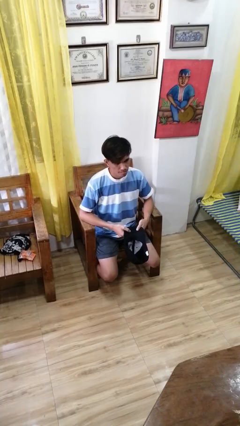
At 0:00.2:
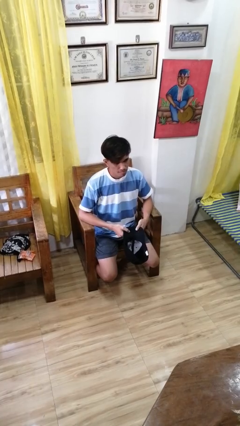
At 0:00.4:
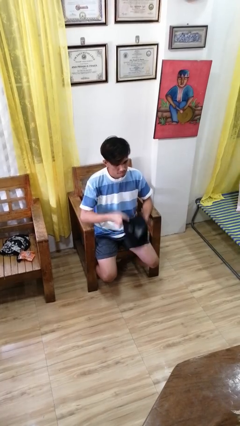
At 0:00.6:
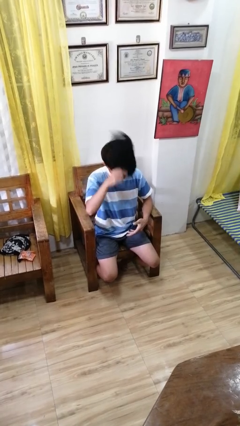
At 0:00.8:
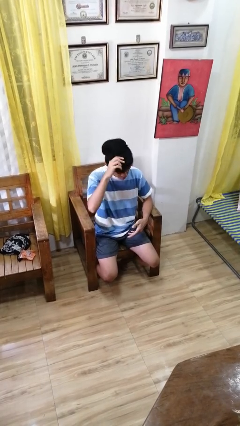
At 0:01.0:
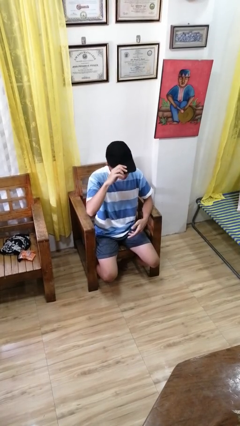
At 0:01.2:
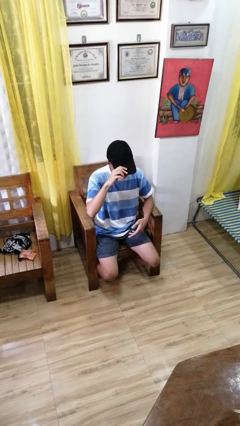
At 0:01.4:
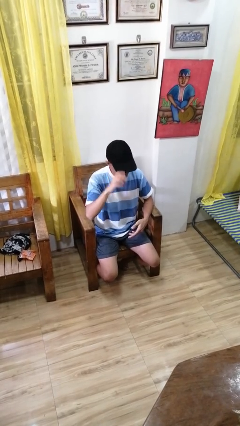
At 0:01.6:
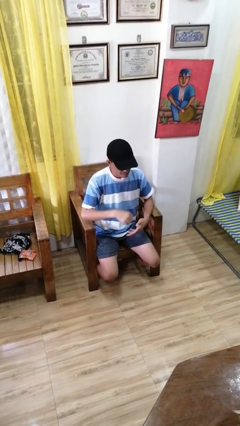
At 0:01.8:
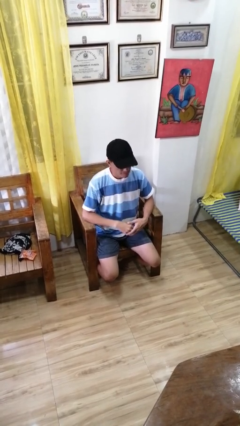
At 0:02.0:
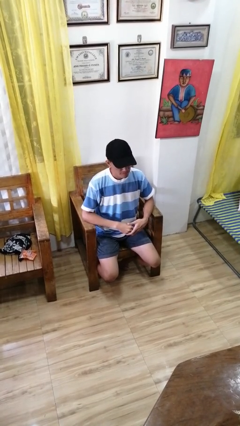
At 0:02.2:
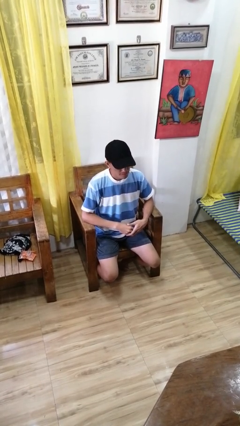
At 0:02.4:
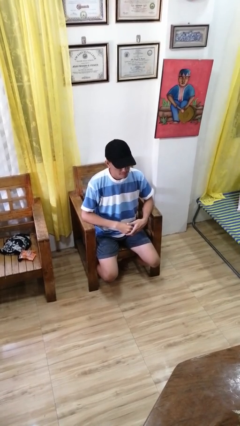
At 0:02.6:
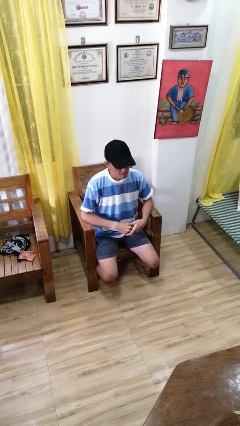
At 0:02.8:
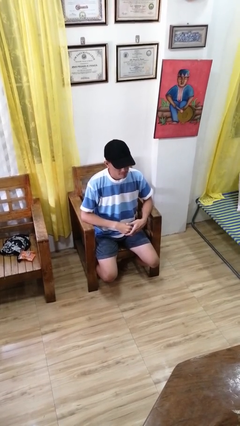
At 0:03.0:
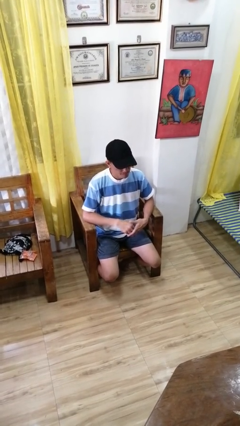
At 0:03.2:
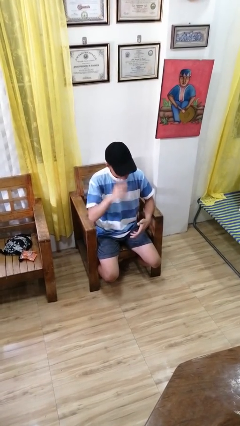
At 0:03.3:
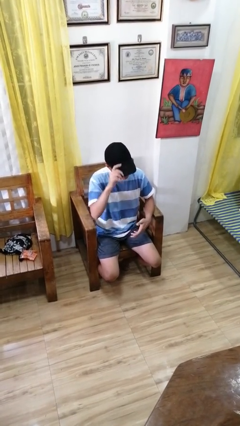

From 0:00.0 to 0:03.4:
person puts on hat

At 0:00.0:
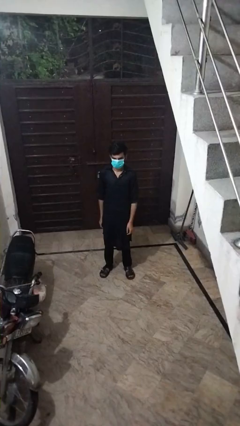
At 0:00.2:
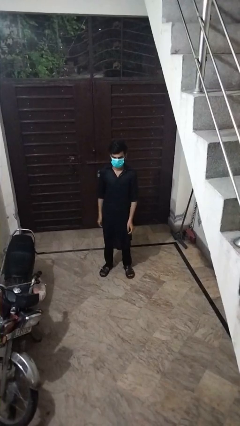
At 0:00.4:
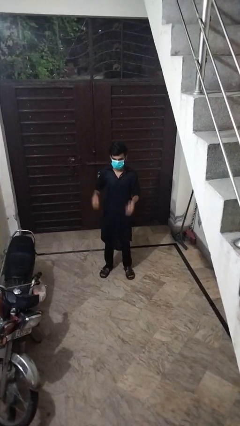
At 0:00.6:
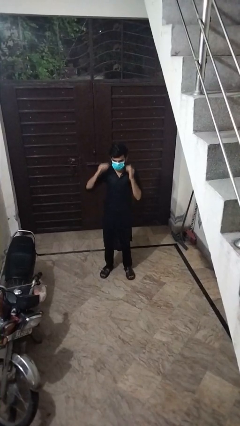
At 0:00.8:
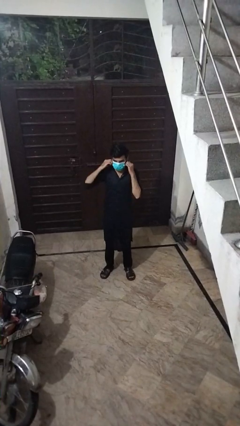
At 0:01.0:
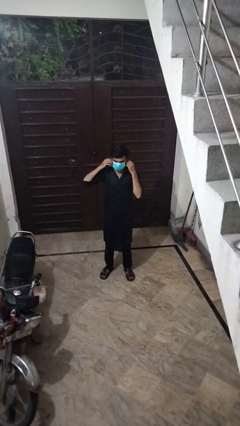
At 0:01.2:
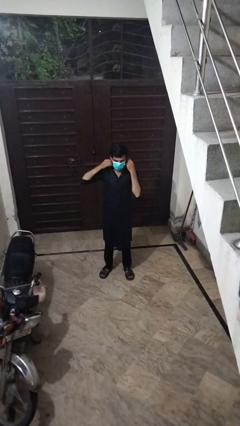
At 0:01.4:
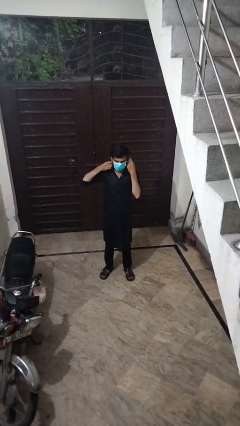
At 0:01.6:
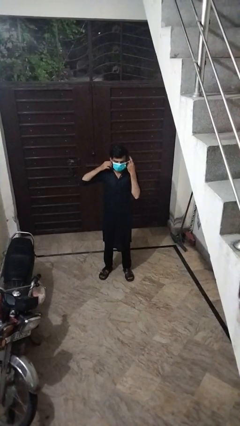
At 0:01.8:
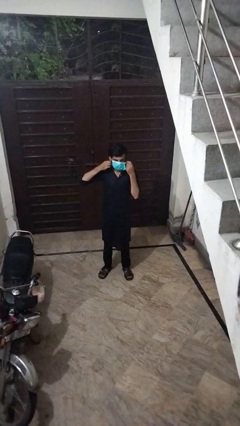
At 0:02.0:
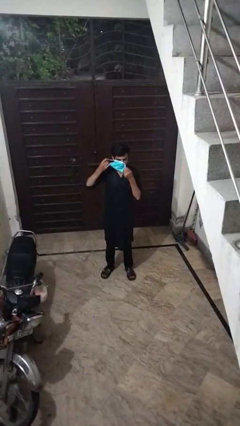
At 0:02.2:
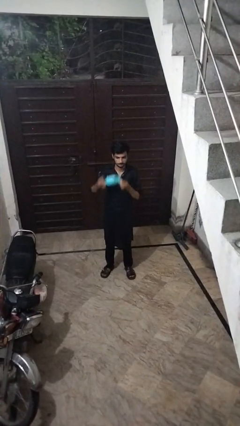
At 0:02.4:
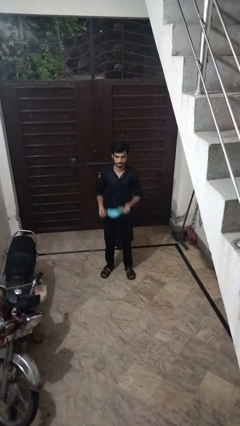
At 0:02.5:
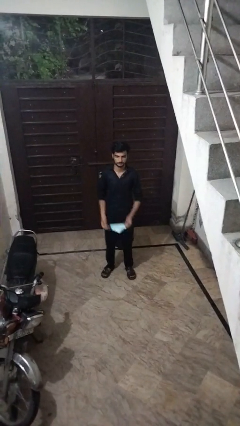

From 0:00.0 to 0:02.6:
person takes off facemask

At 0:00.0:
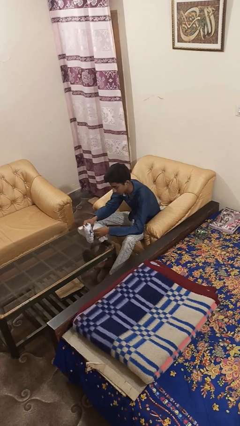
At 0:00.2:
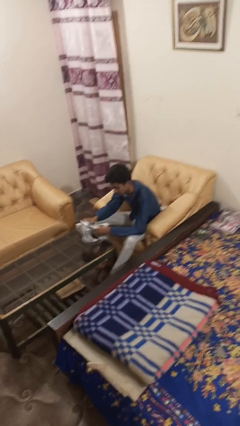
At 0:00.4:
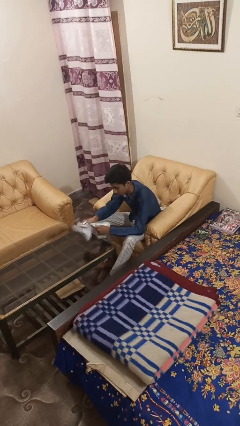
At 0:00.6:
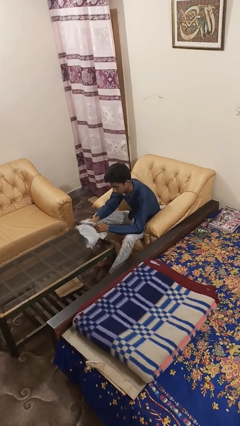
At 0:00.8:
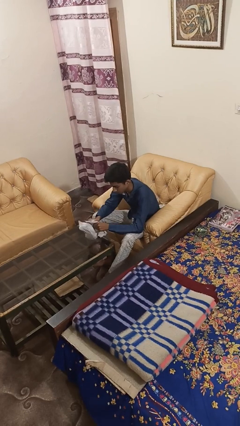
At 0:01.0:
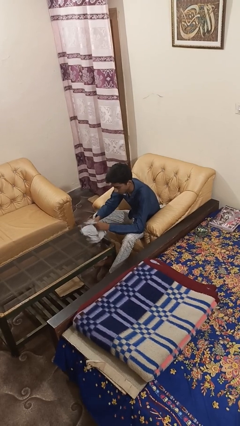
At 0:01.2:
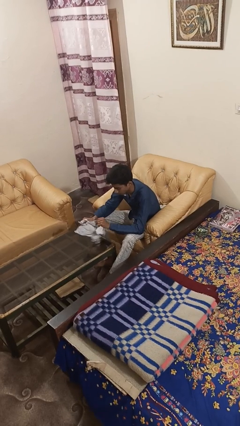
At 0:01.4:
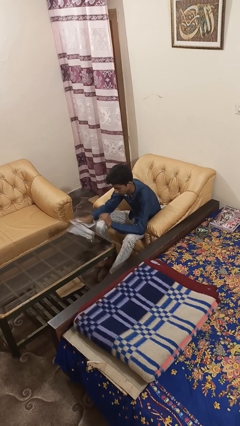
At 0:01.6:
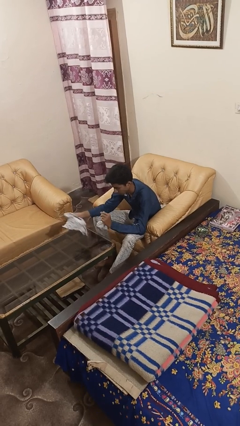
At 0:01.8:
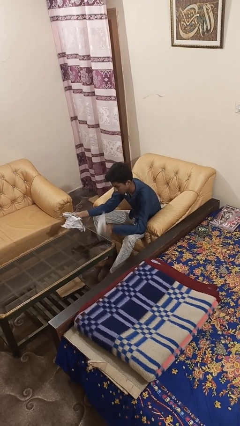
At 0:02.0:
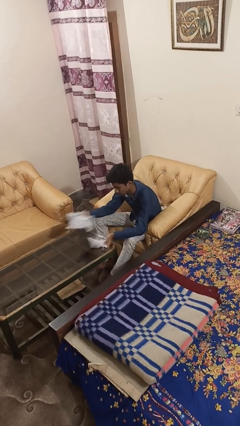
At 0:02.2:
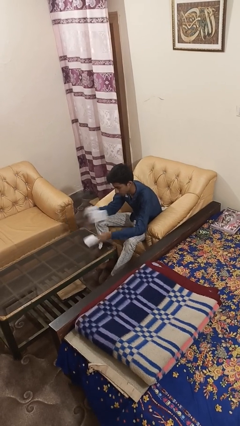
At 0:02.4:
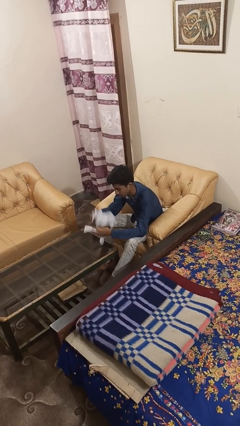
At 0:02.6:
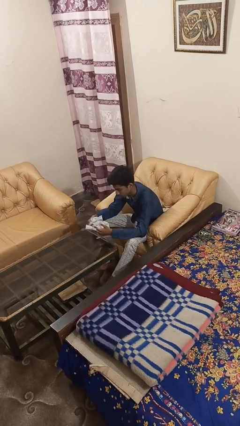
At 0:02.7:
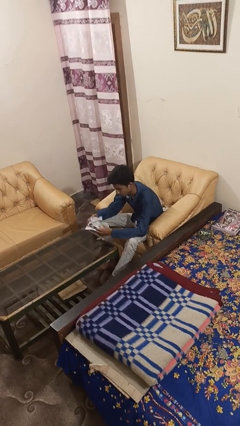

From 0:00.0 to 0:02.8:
person tears paper

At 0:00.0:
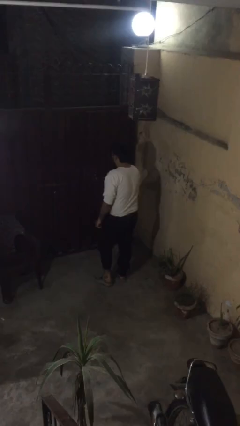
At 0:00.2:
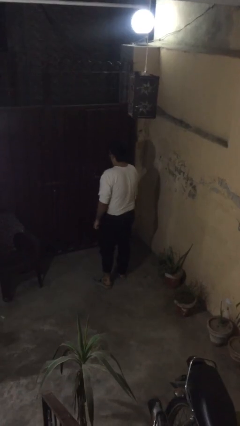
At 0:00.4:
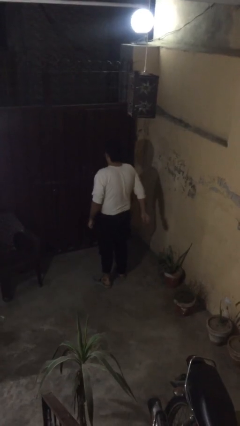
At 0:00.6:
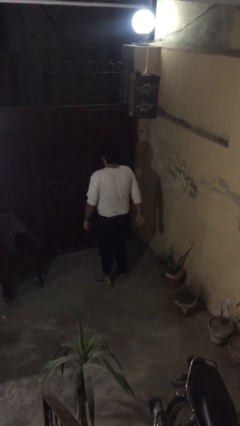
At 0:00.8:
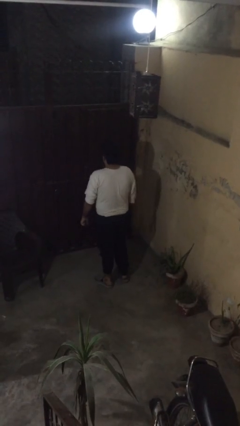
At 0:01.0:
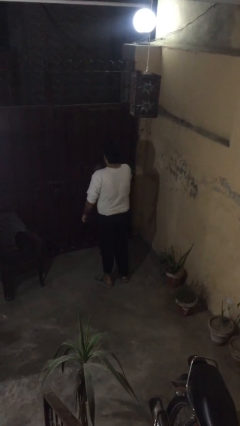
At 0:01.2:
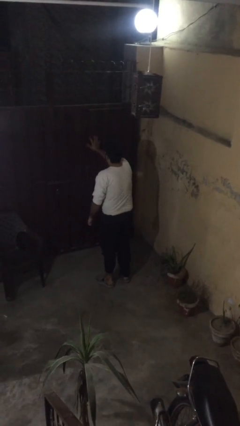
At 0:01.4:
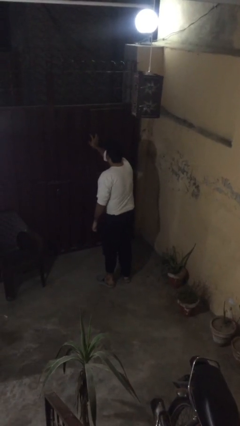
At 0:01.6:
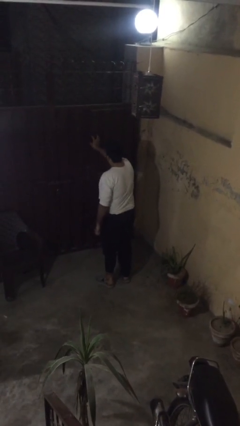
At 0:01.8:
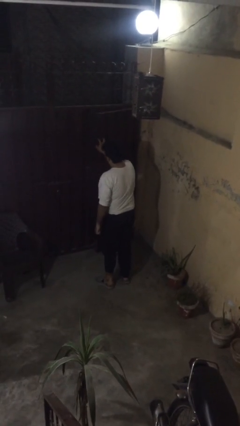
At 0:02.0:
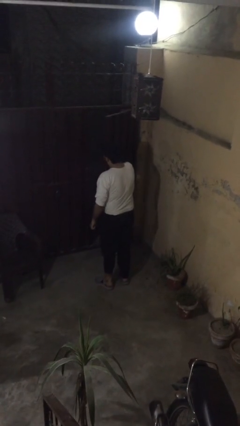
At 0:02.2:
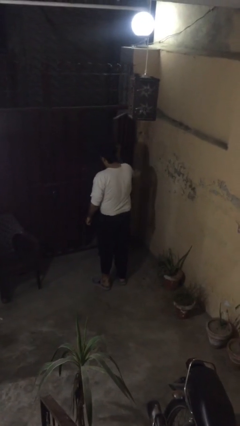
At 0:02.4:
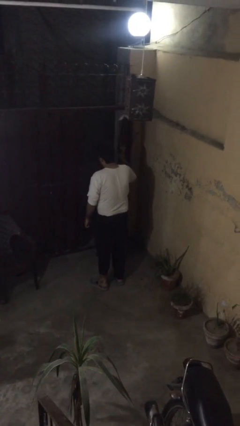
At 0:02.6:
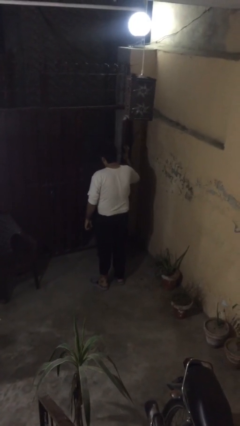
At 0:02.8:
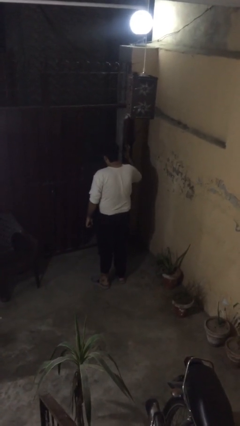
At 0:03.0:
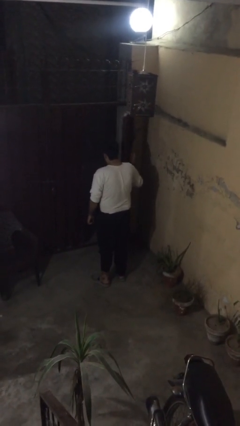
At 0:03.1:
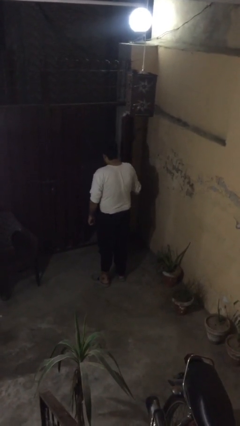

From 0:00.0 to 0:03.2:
person opens facility door

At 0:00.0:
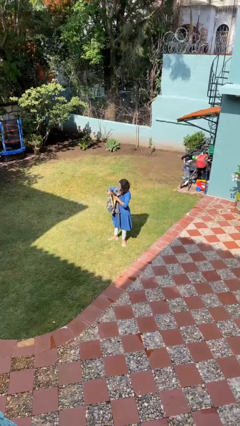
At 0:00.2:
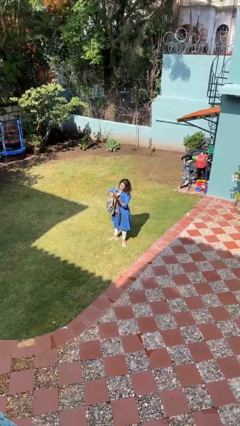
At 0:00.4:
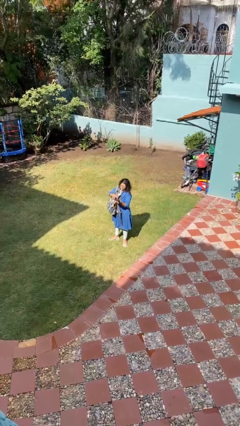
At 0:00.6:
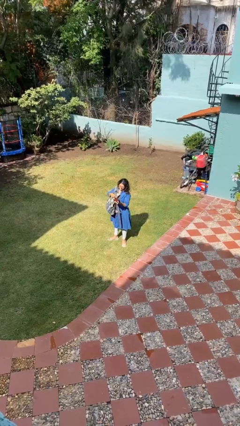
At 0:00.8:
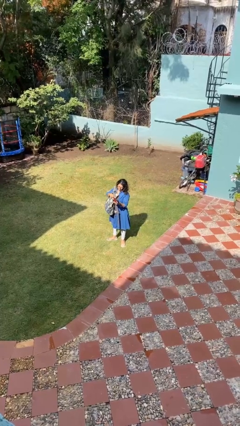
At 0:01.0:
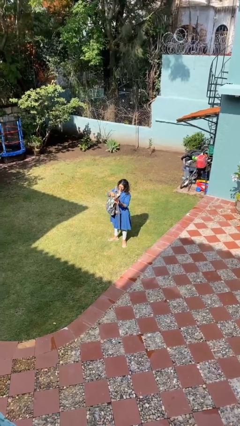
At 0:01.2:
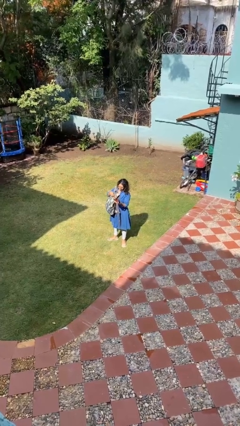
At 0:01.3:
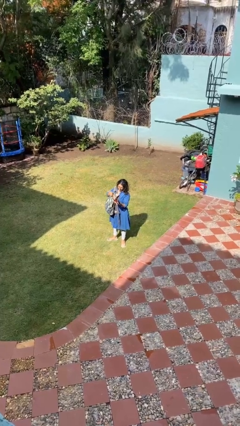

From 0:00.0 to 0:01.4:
person takes object from backpack

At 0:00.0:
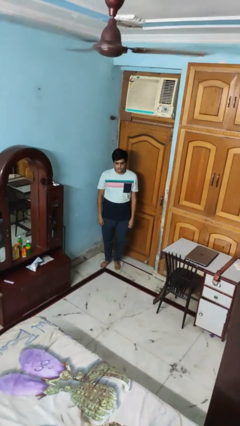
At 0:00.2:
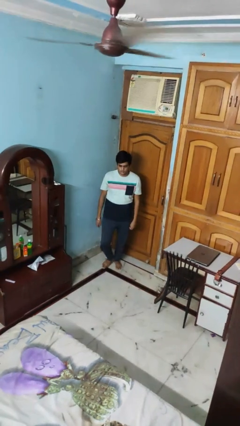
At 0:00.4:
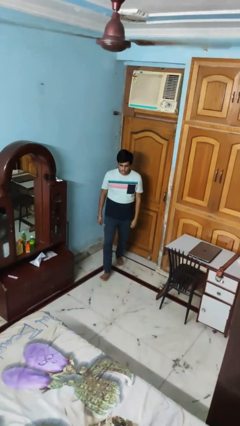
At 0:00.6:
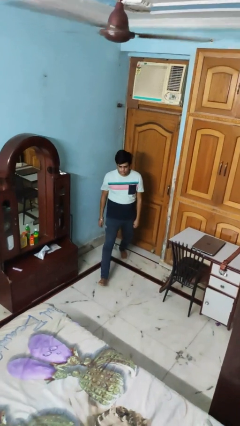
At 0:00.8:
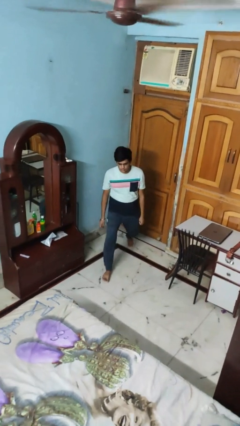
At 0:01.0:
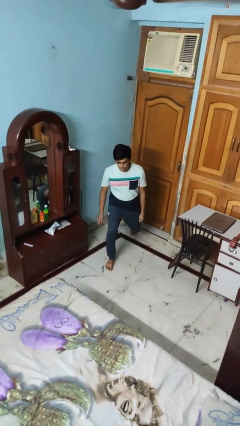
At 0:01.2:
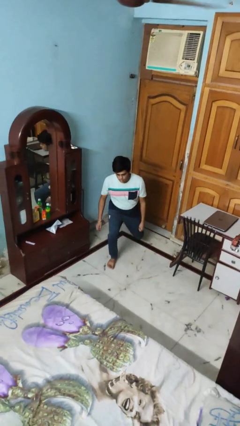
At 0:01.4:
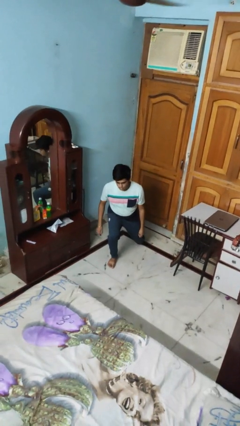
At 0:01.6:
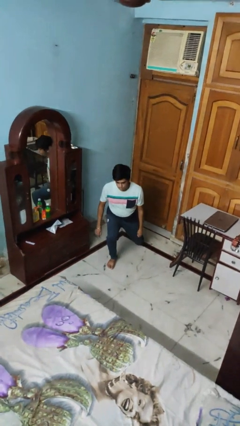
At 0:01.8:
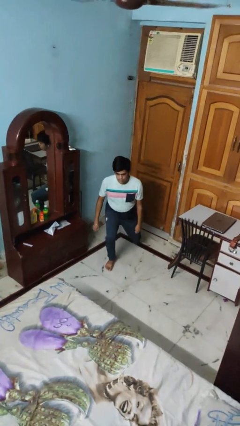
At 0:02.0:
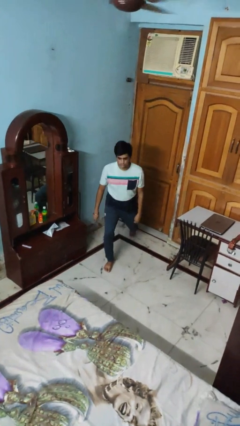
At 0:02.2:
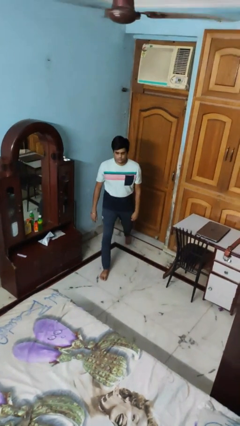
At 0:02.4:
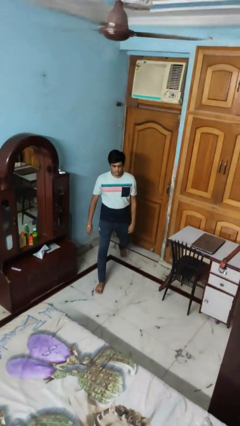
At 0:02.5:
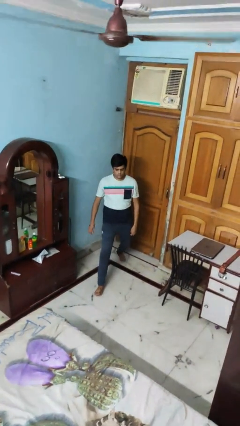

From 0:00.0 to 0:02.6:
person exercises with lunges

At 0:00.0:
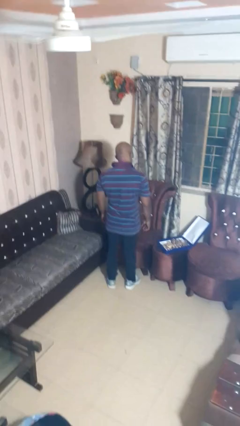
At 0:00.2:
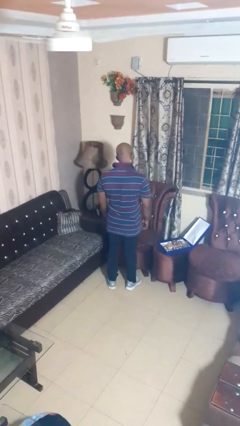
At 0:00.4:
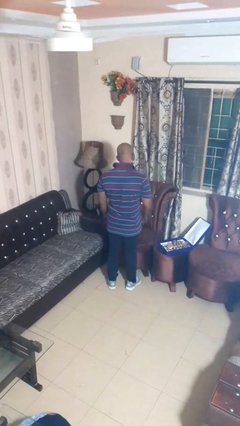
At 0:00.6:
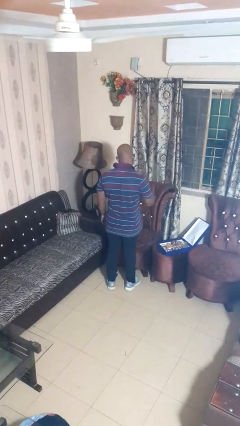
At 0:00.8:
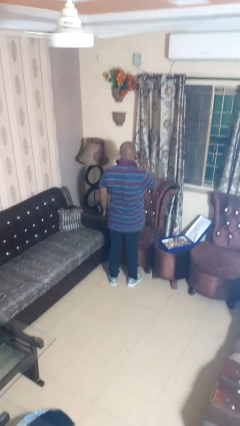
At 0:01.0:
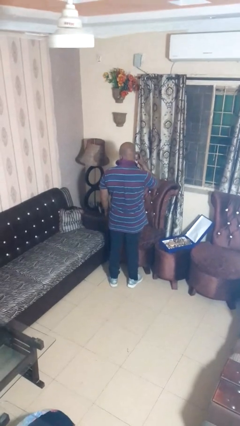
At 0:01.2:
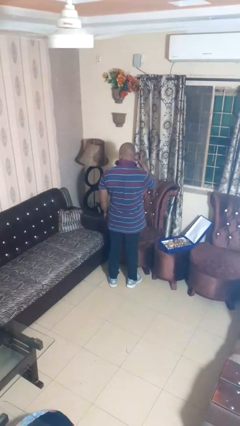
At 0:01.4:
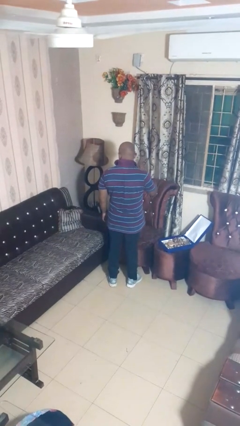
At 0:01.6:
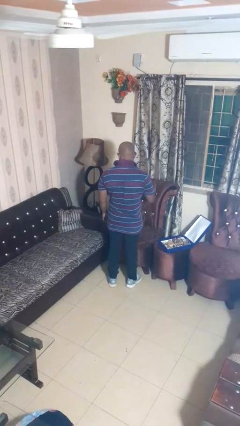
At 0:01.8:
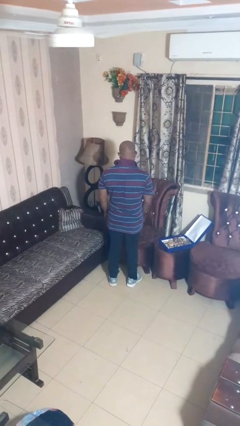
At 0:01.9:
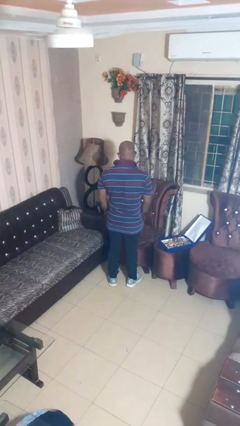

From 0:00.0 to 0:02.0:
person takes off earrings
